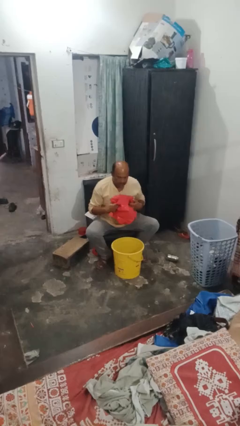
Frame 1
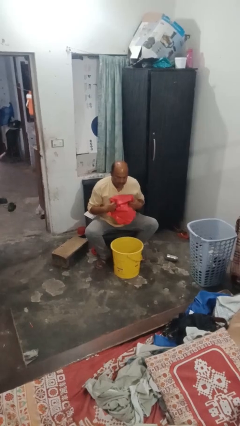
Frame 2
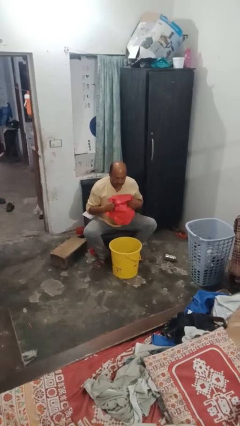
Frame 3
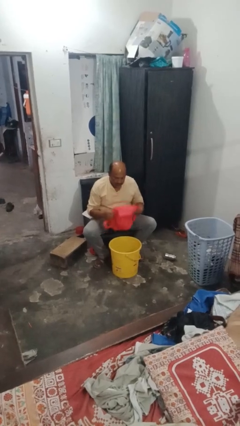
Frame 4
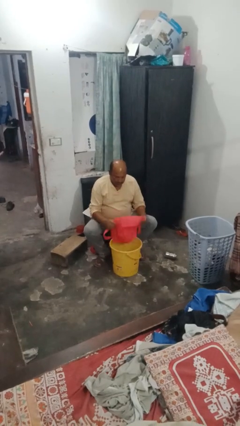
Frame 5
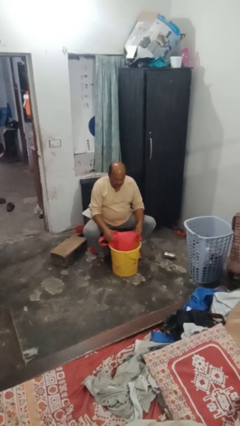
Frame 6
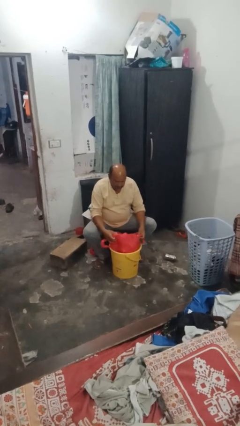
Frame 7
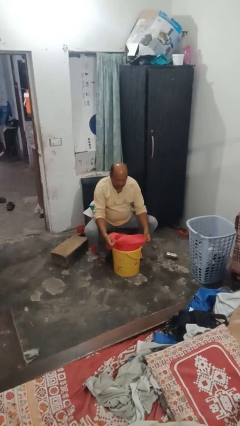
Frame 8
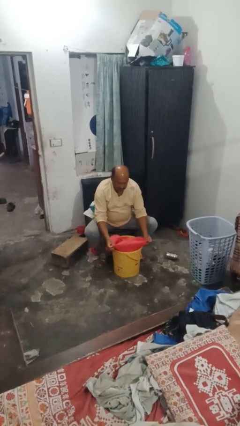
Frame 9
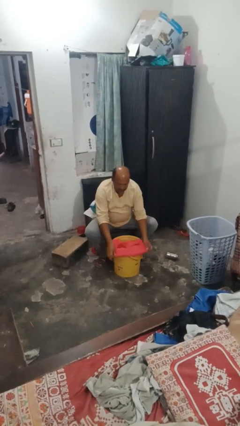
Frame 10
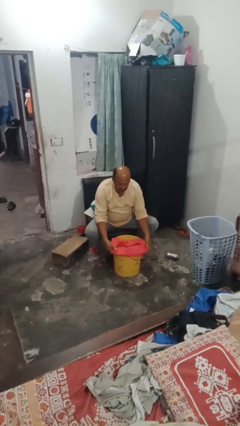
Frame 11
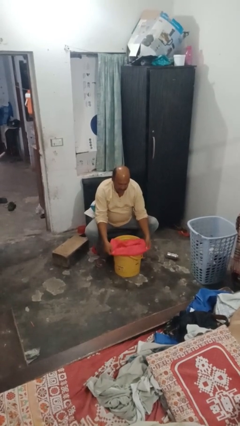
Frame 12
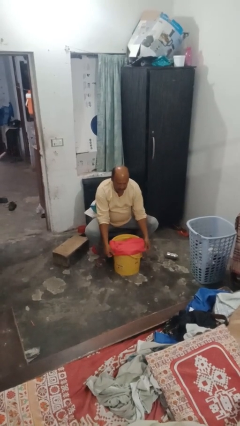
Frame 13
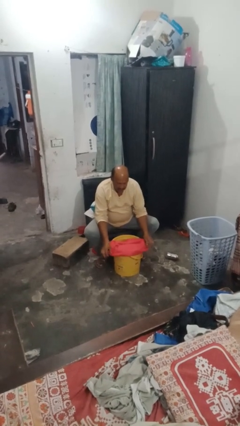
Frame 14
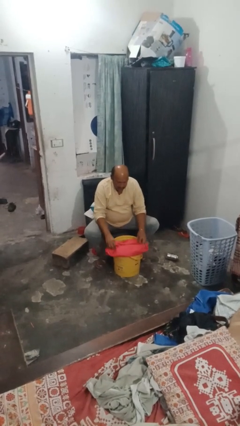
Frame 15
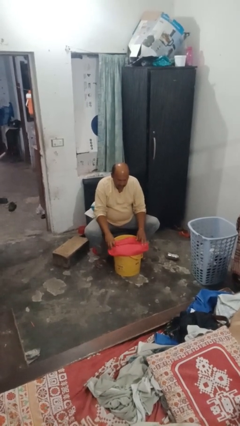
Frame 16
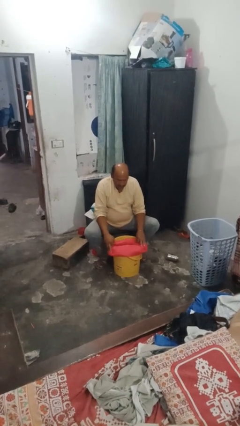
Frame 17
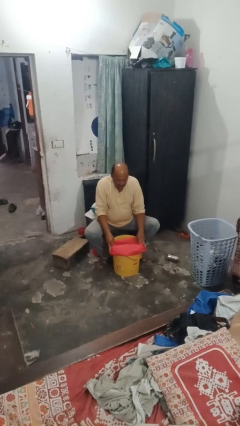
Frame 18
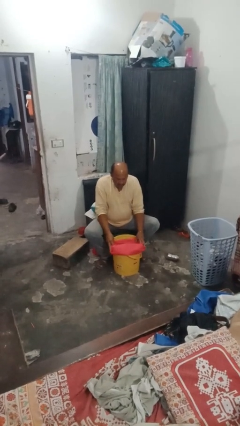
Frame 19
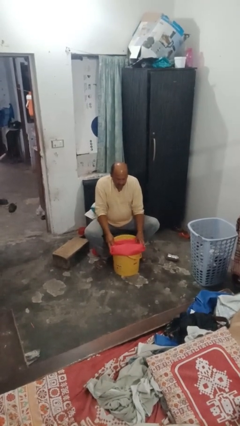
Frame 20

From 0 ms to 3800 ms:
person inserts trashbag into trashcan

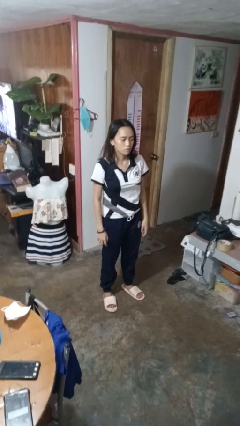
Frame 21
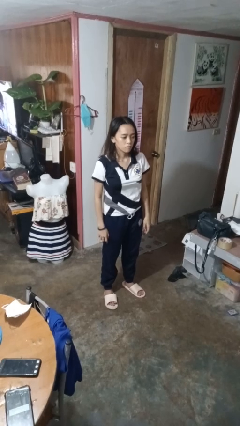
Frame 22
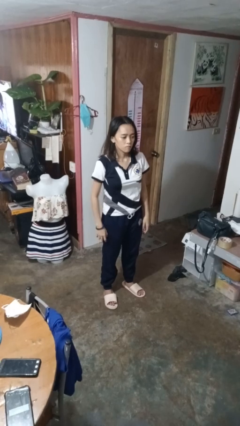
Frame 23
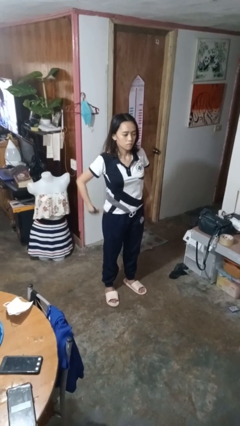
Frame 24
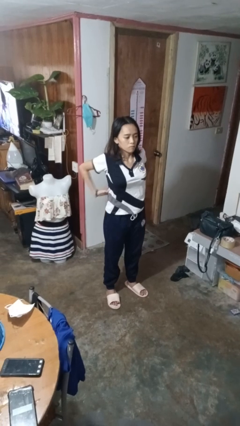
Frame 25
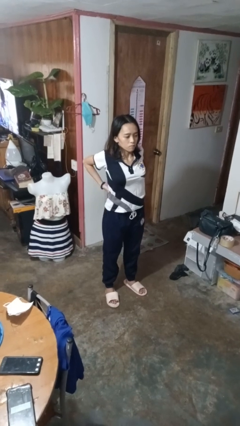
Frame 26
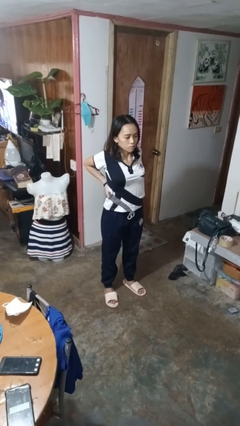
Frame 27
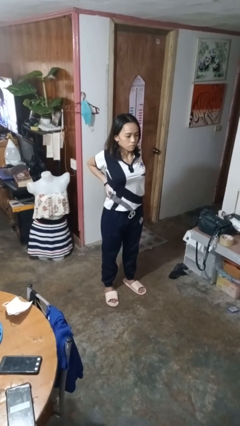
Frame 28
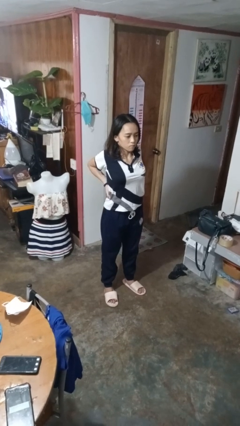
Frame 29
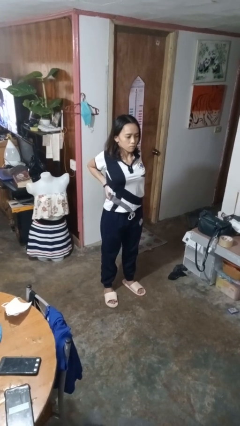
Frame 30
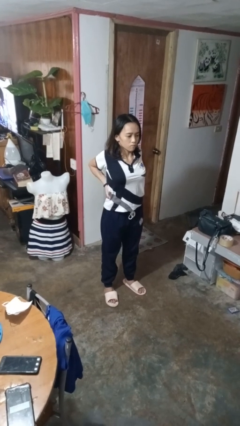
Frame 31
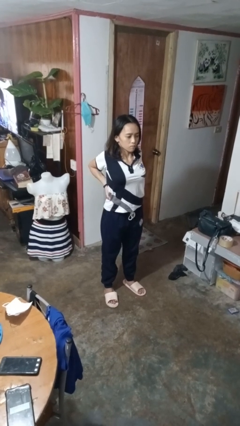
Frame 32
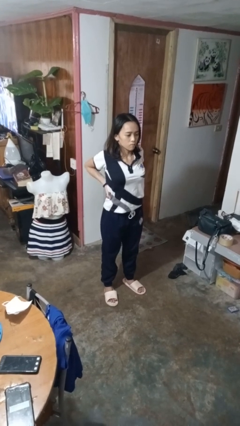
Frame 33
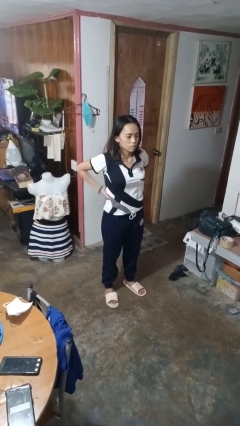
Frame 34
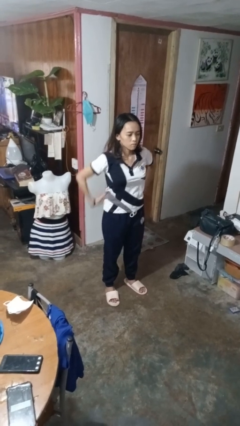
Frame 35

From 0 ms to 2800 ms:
person stretches back

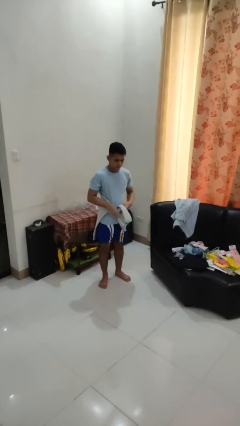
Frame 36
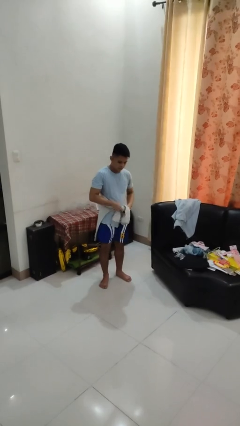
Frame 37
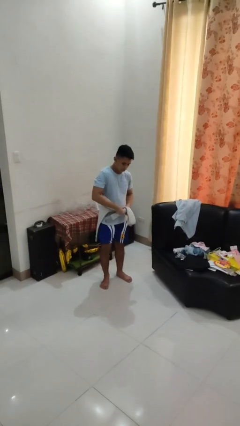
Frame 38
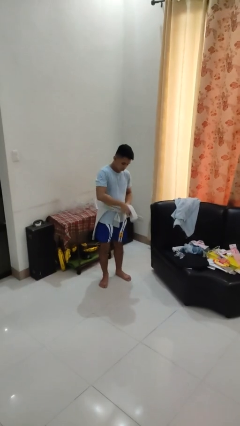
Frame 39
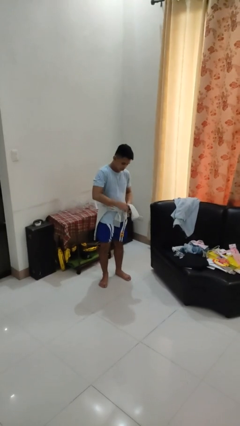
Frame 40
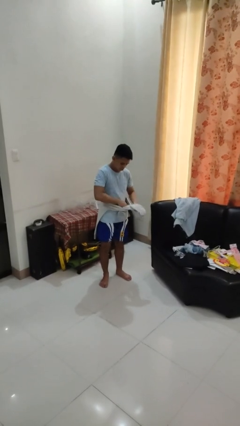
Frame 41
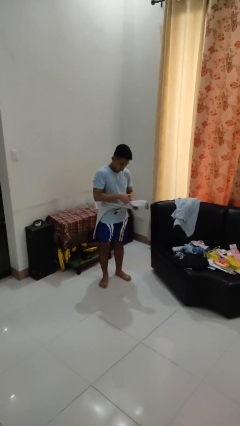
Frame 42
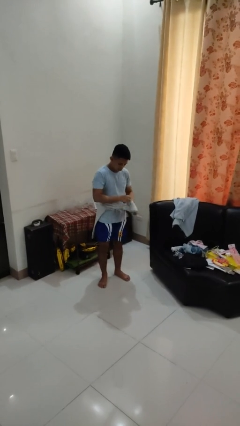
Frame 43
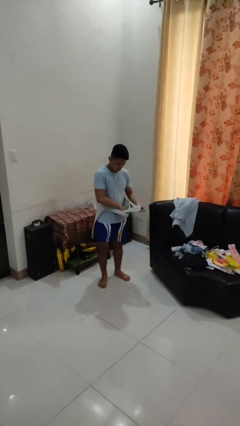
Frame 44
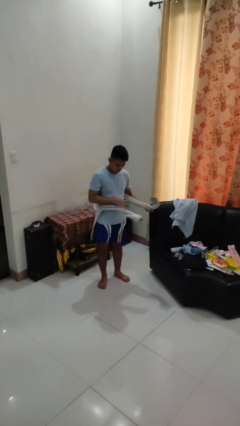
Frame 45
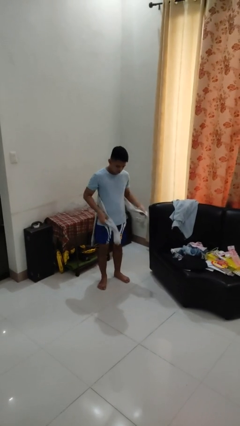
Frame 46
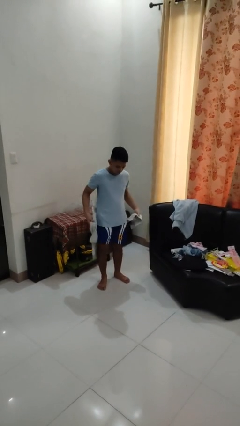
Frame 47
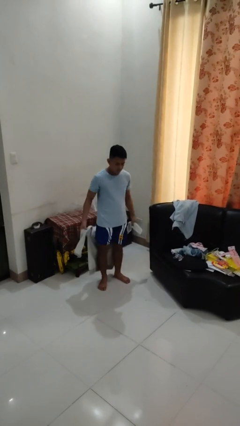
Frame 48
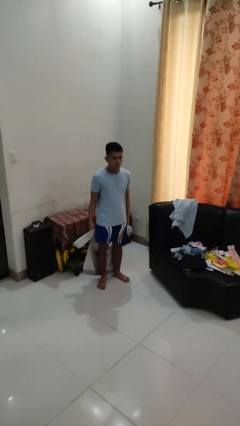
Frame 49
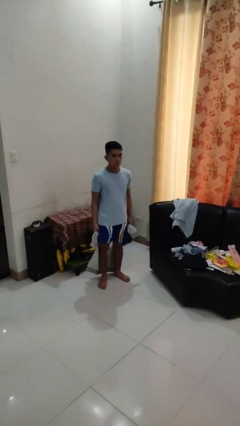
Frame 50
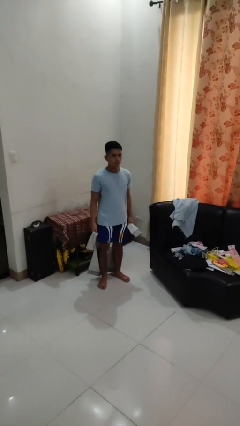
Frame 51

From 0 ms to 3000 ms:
person unties jacket around waist

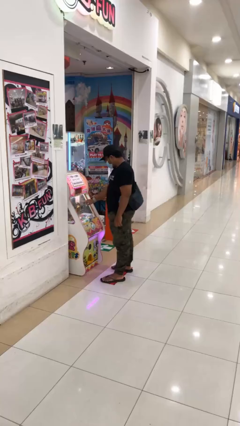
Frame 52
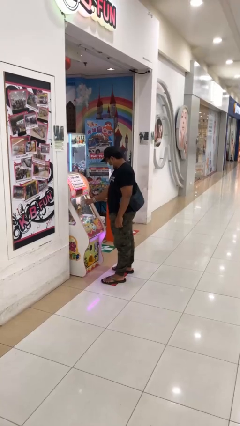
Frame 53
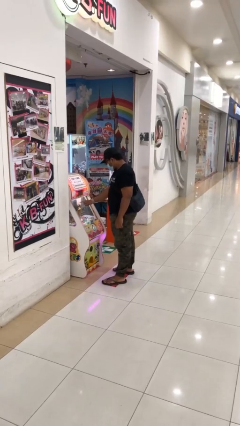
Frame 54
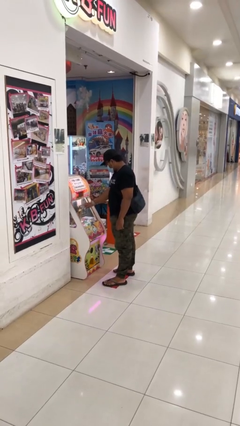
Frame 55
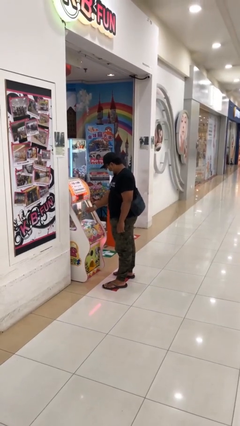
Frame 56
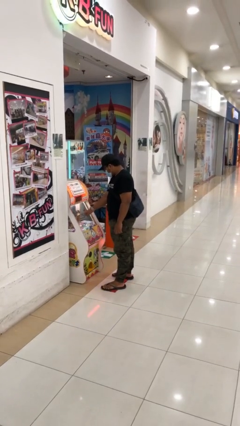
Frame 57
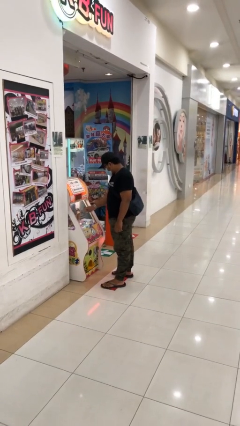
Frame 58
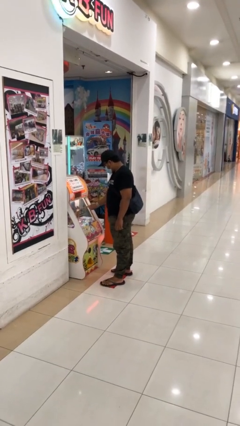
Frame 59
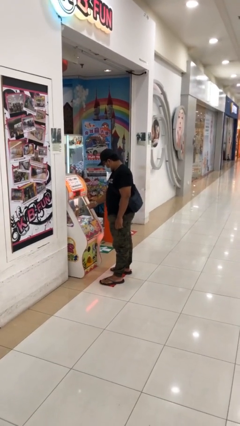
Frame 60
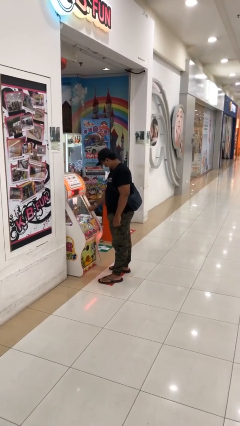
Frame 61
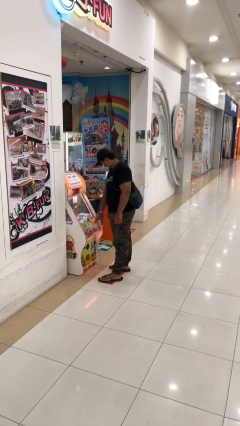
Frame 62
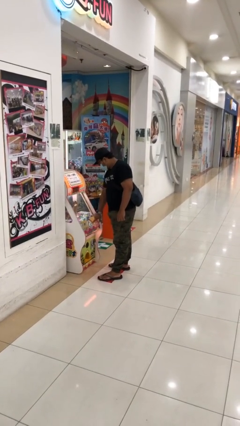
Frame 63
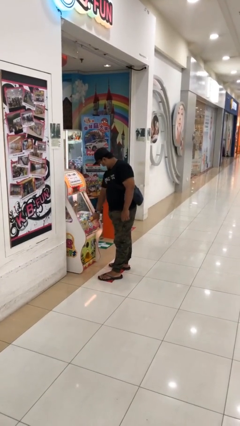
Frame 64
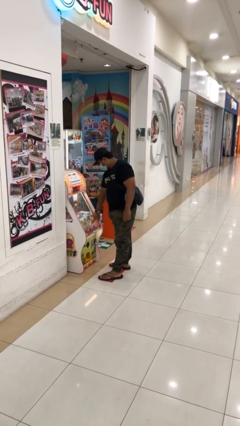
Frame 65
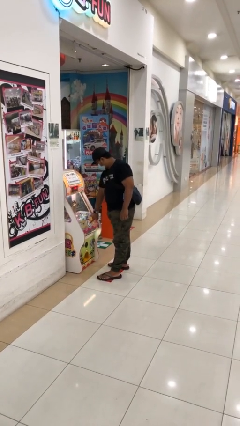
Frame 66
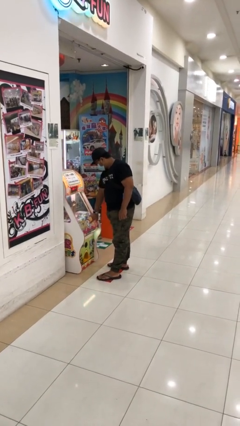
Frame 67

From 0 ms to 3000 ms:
person purchases from machine

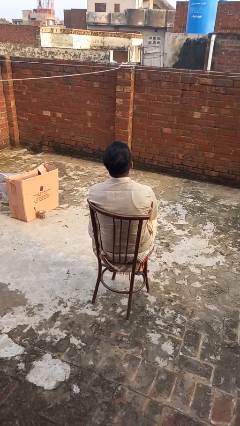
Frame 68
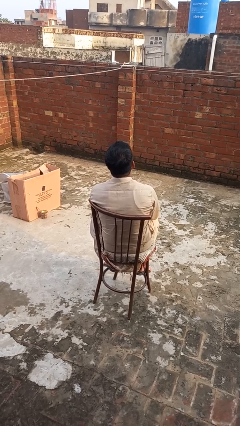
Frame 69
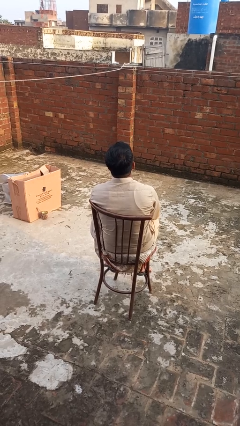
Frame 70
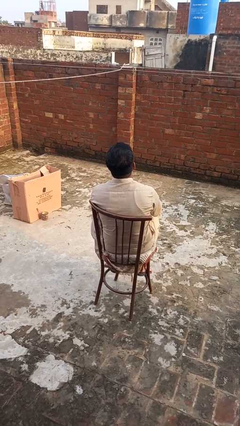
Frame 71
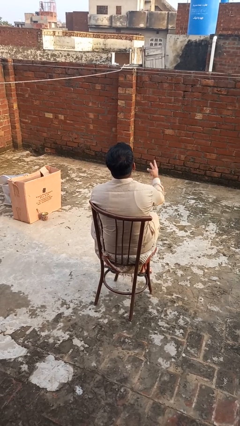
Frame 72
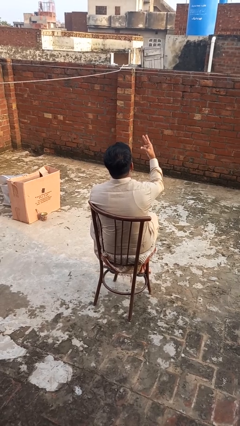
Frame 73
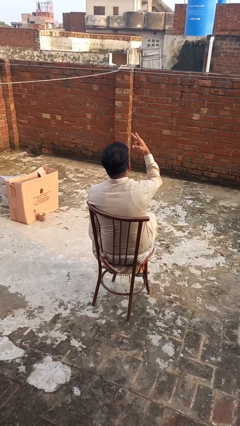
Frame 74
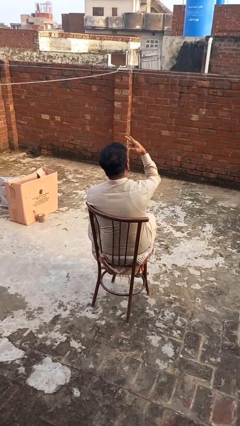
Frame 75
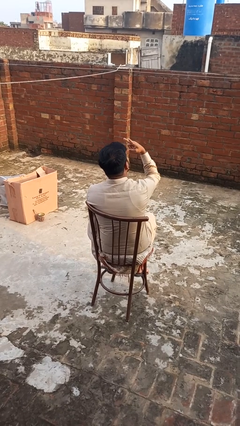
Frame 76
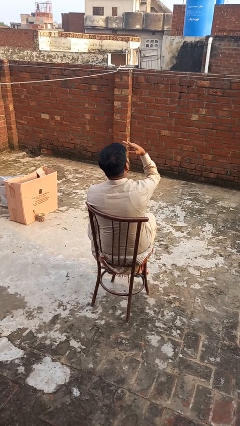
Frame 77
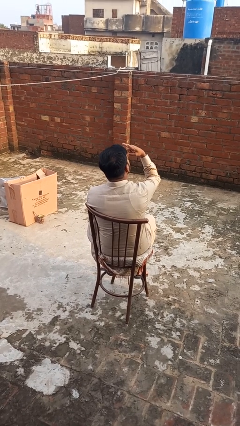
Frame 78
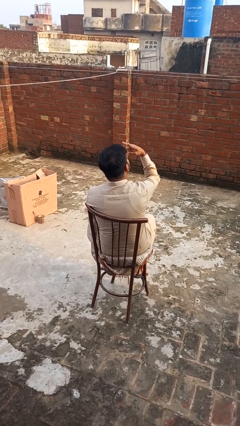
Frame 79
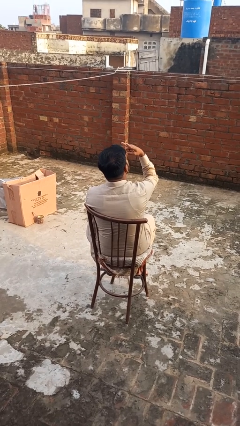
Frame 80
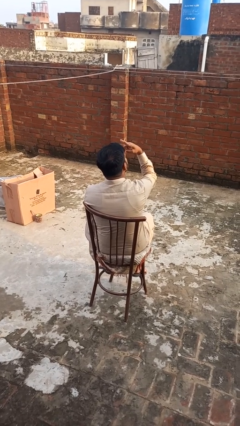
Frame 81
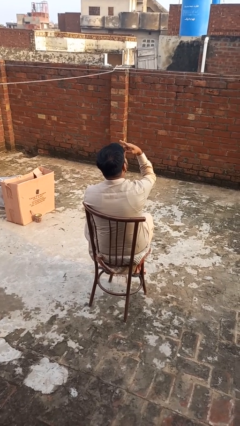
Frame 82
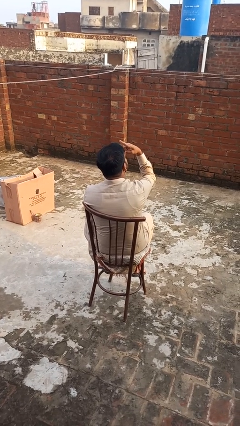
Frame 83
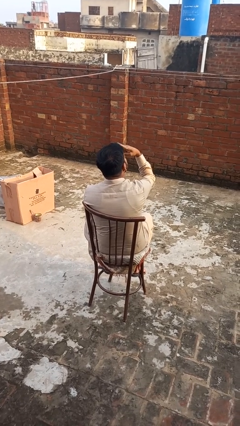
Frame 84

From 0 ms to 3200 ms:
person gestures watch closely

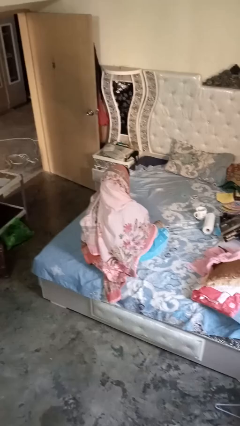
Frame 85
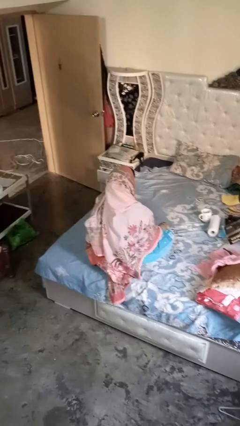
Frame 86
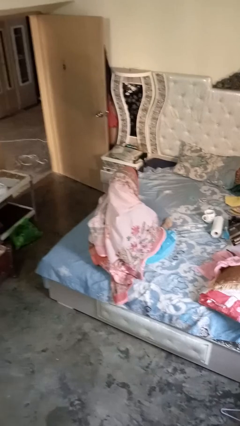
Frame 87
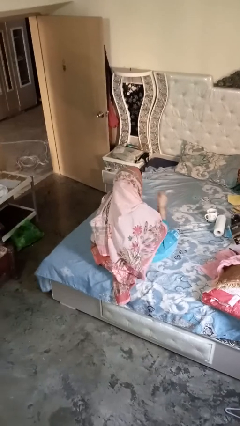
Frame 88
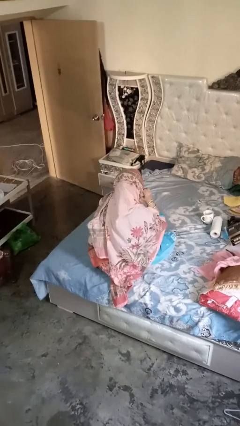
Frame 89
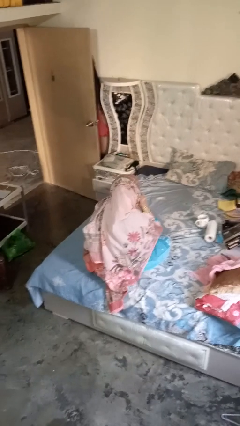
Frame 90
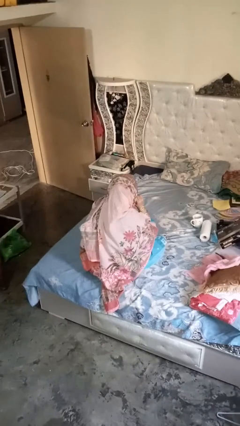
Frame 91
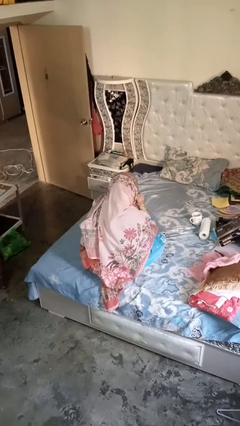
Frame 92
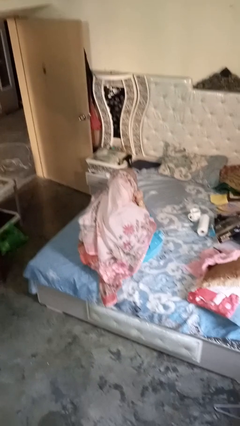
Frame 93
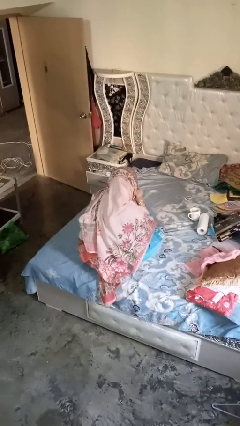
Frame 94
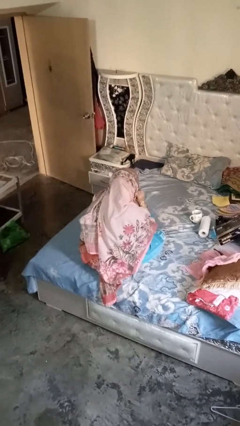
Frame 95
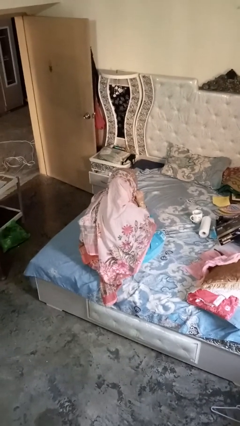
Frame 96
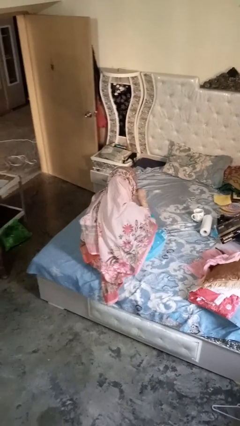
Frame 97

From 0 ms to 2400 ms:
person gestures listen closely
